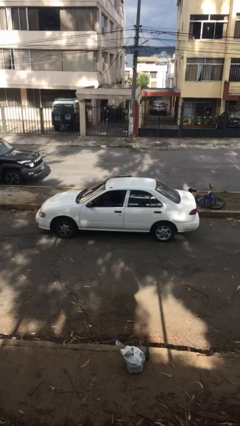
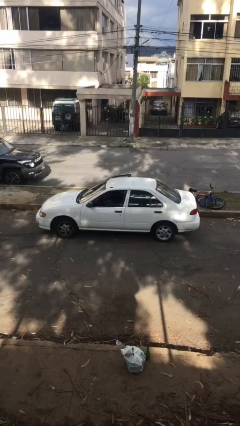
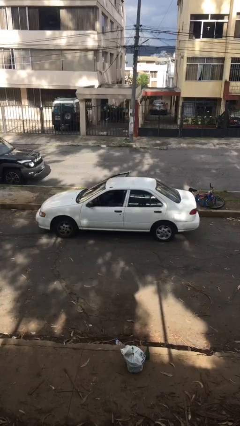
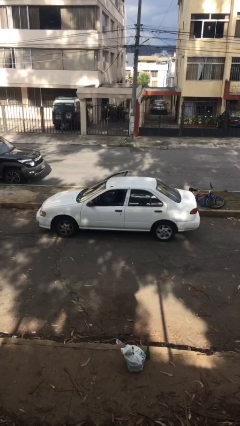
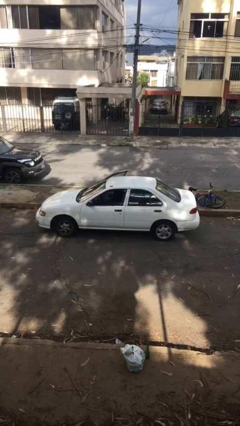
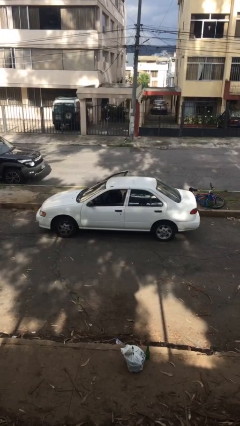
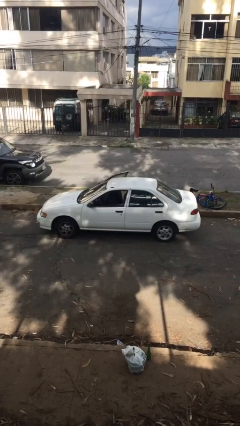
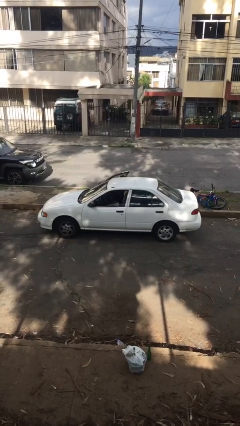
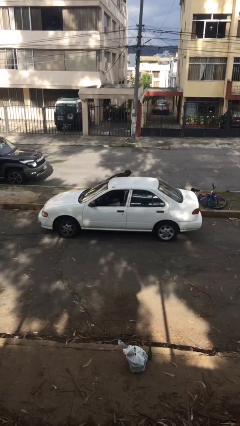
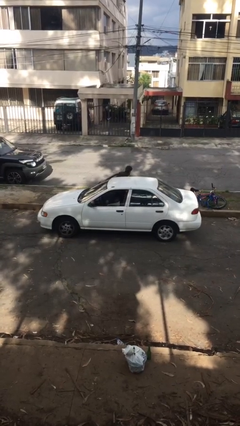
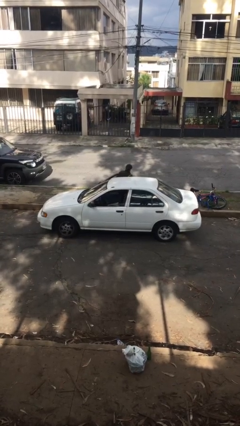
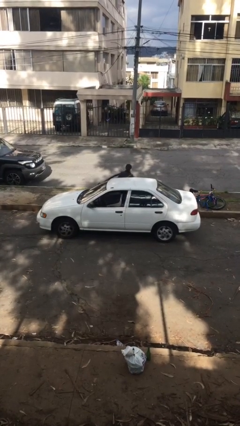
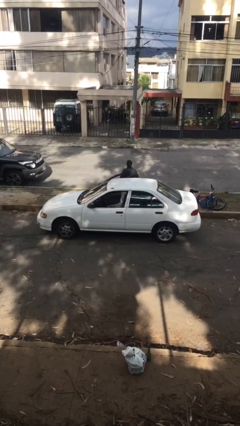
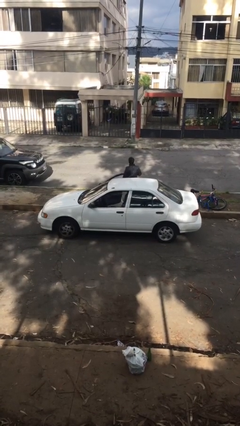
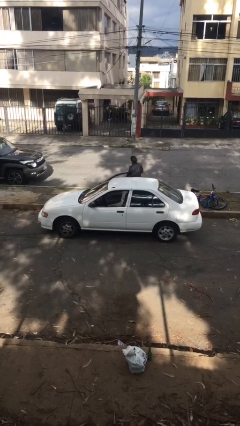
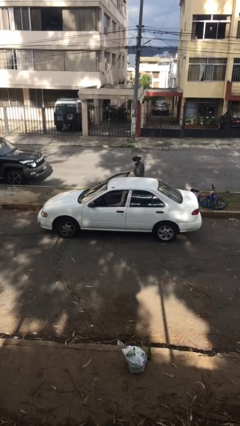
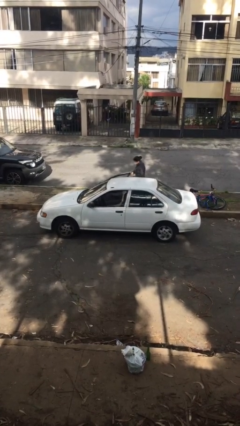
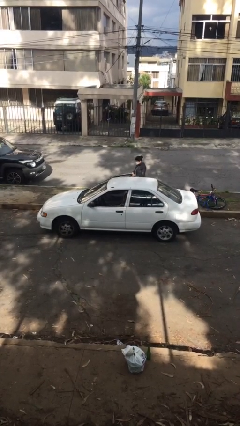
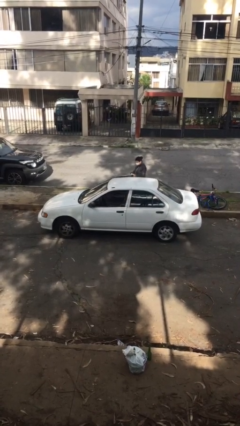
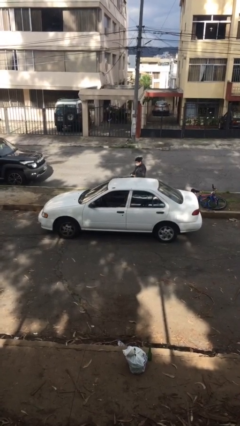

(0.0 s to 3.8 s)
car drops off person

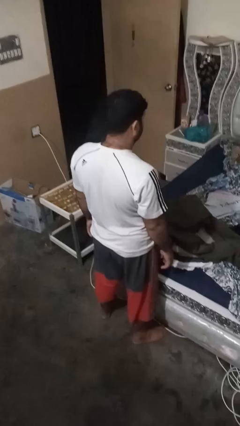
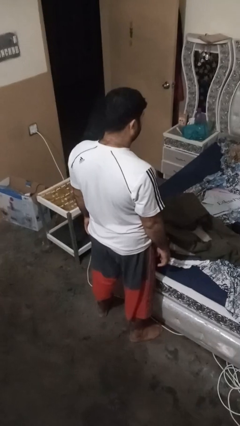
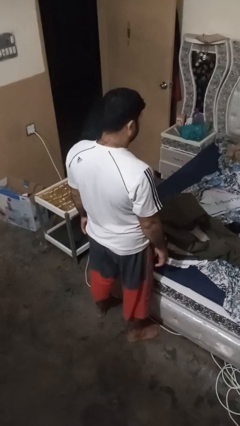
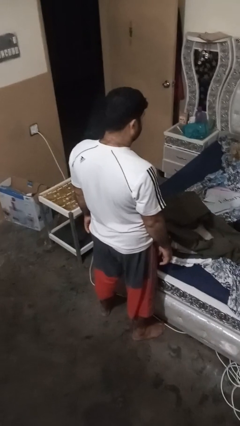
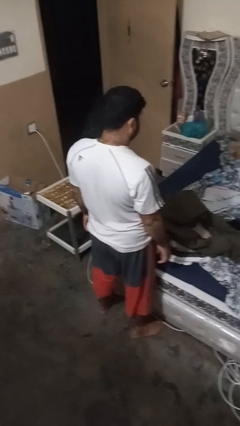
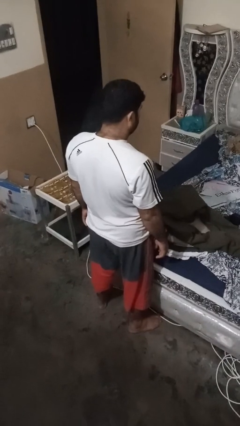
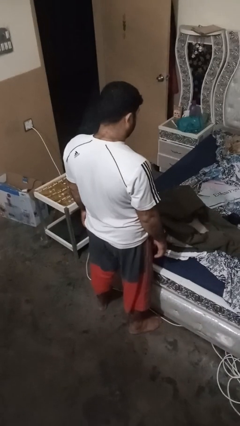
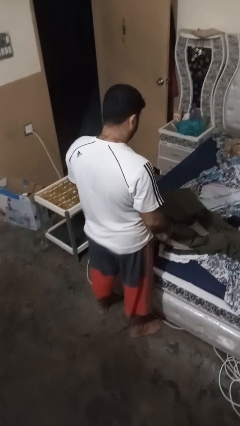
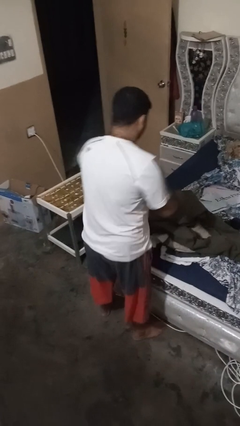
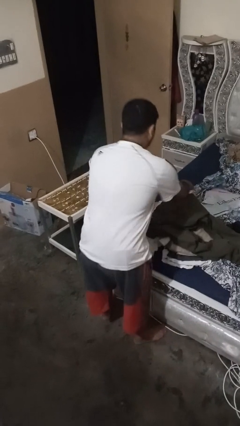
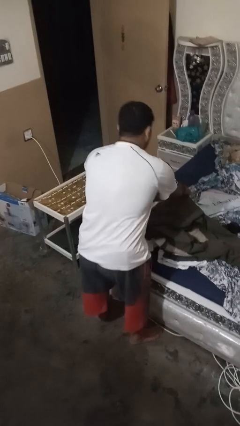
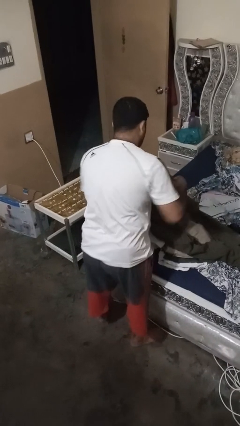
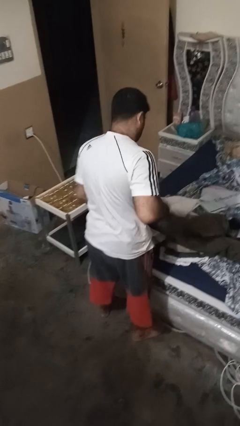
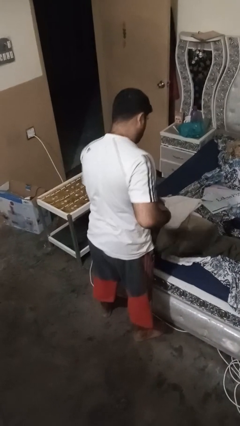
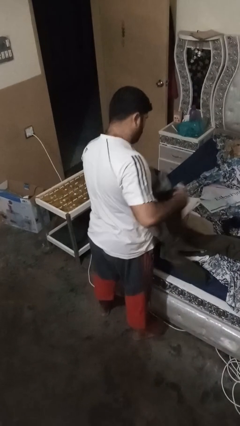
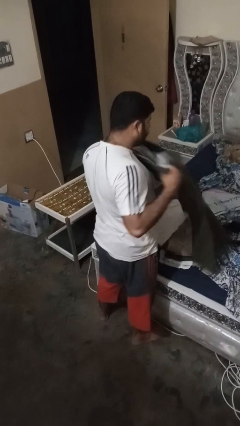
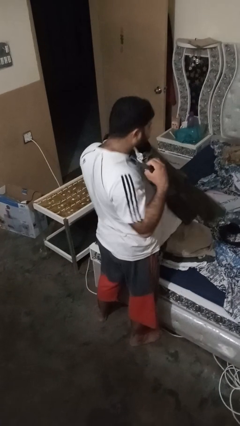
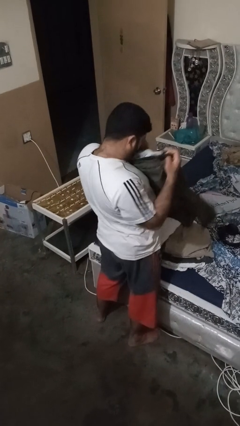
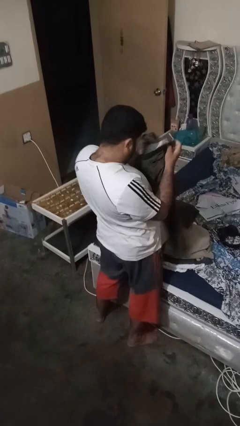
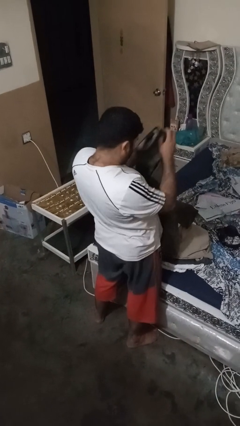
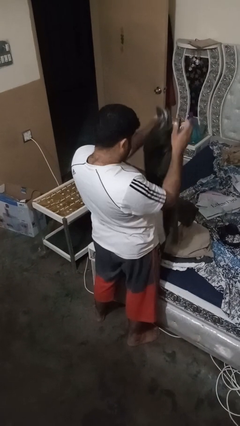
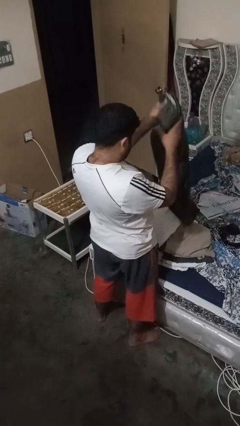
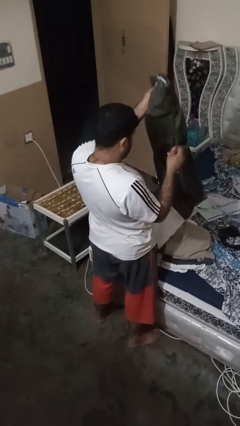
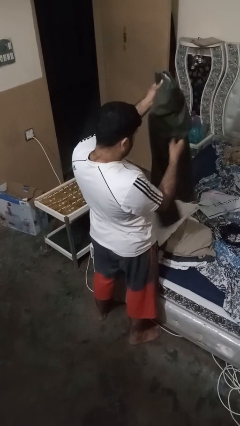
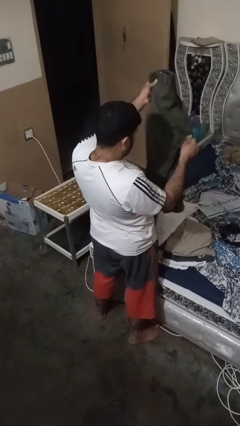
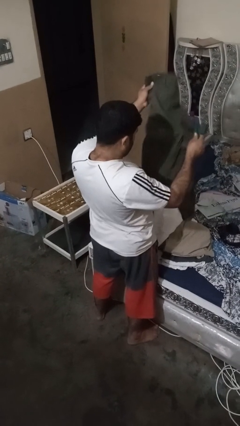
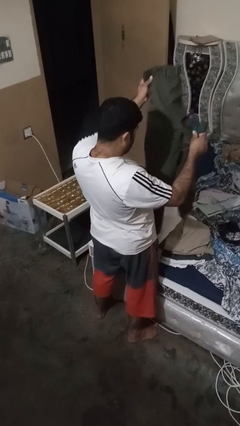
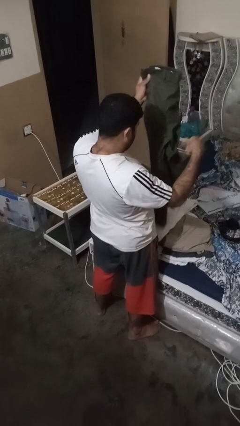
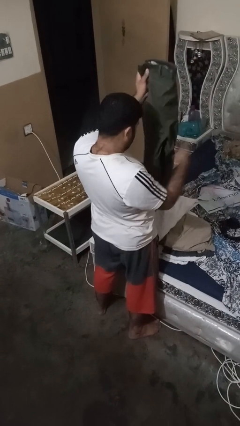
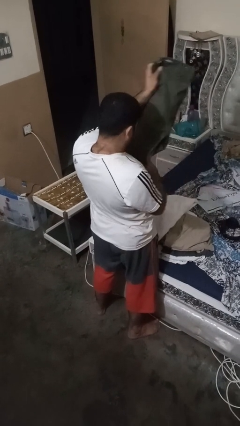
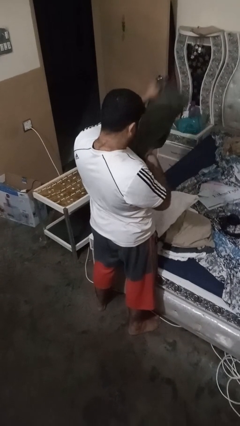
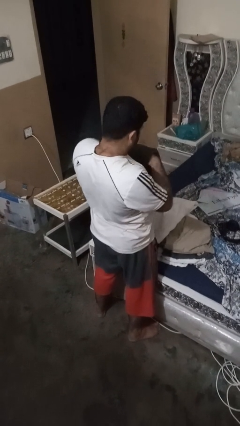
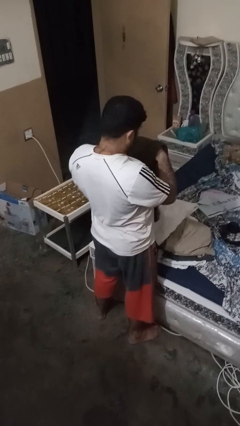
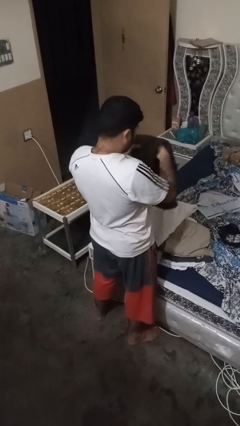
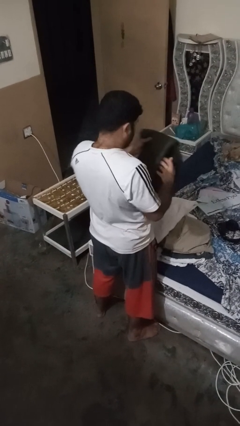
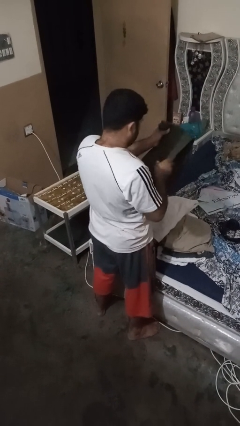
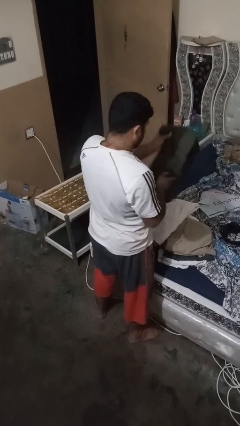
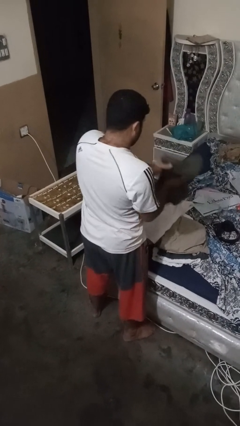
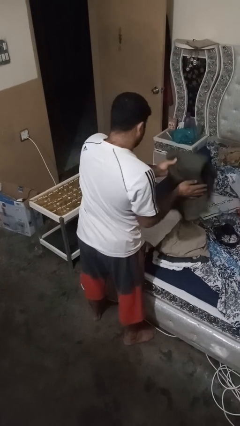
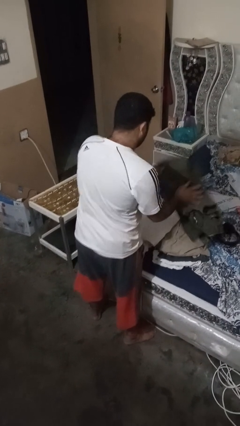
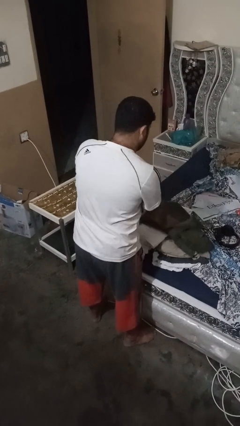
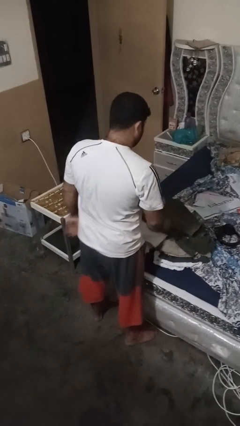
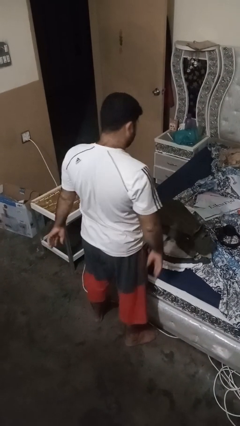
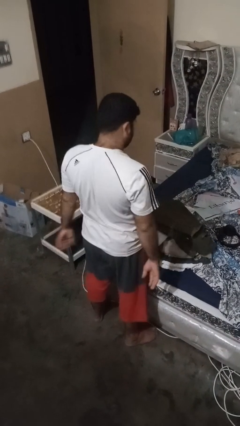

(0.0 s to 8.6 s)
person folds pants

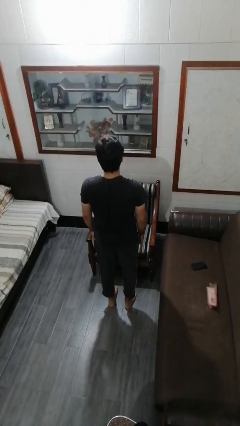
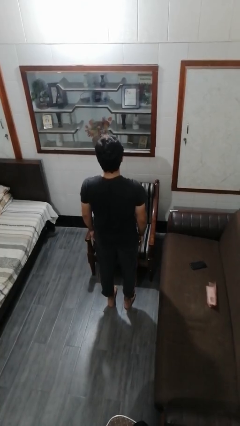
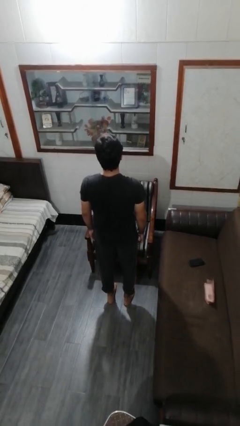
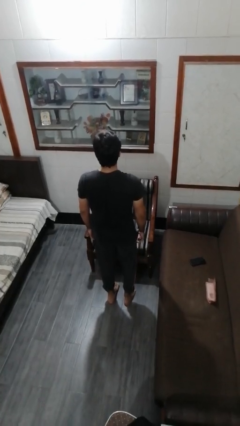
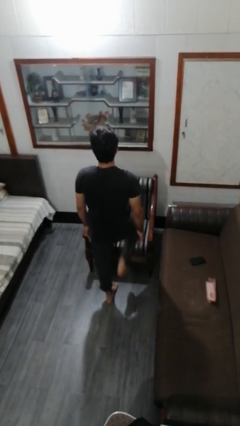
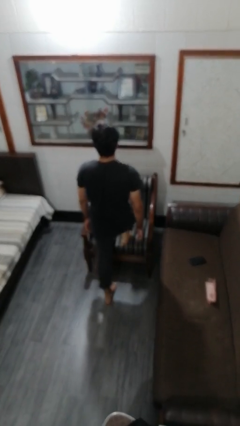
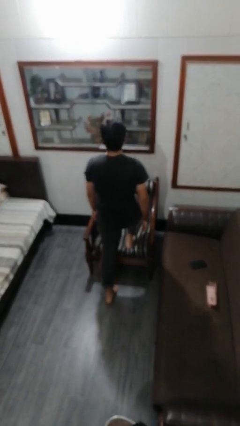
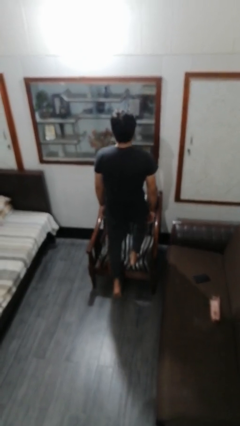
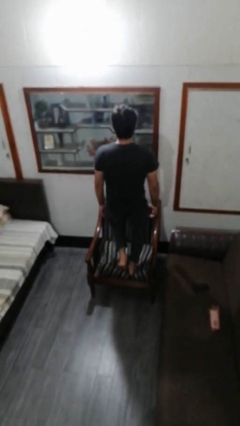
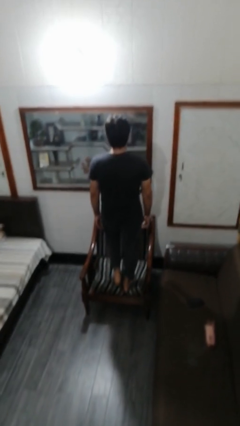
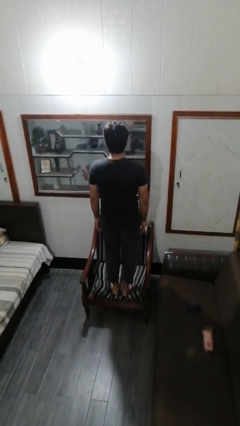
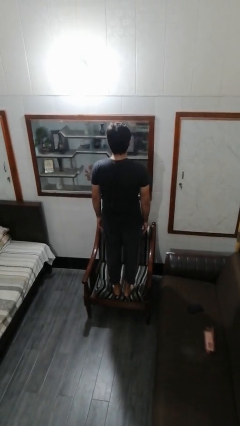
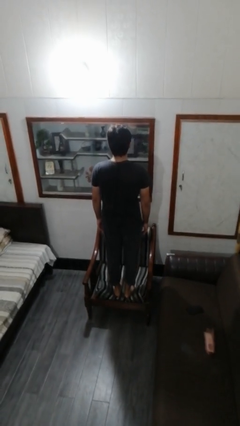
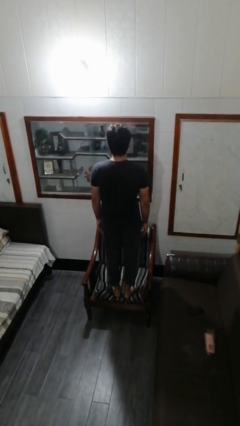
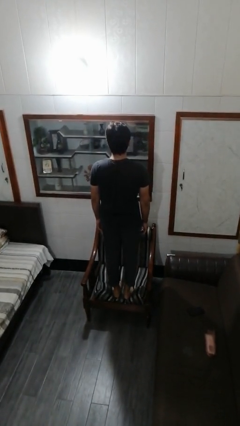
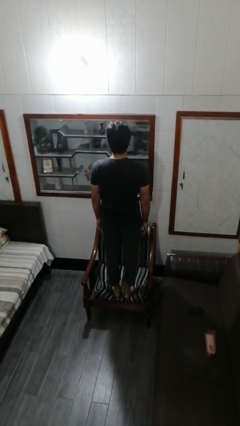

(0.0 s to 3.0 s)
person climbs on chair

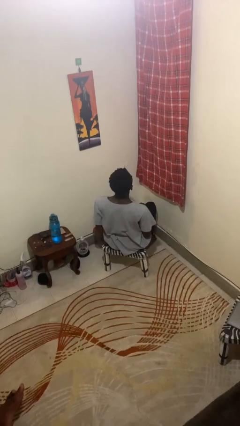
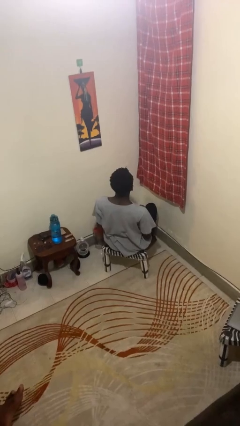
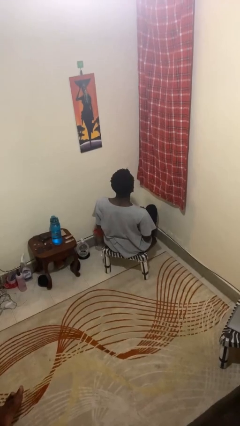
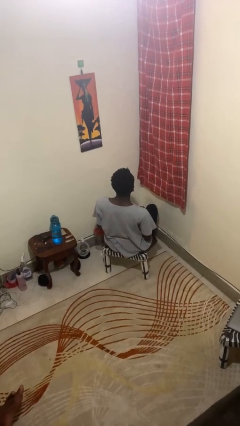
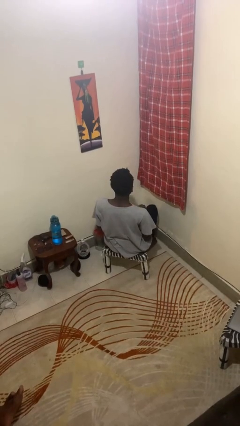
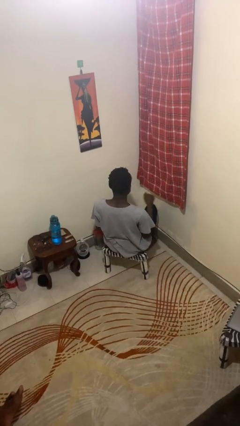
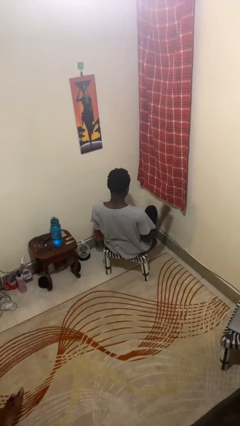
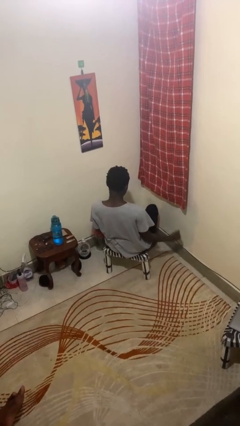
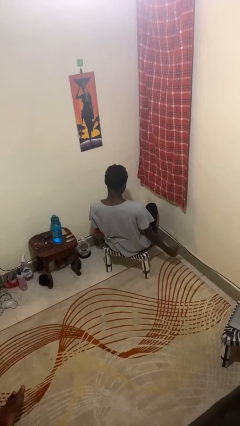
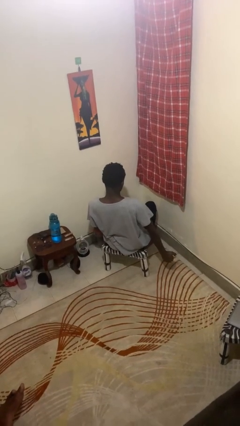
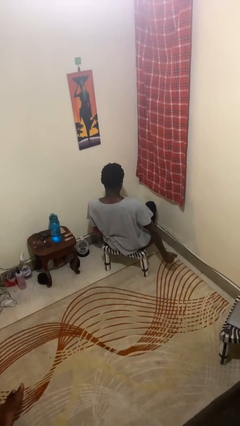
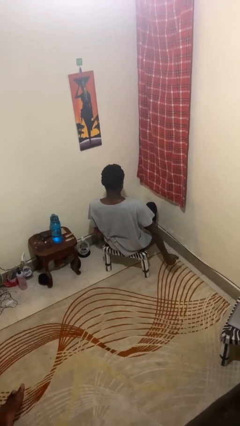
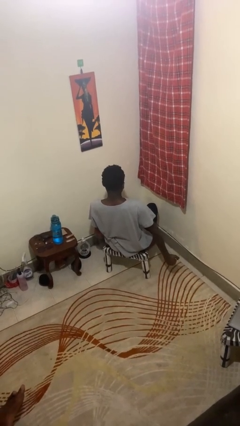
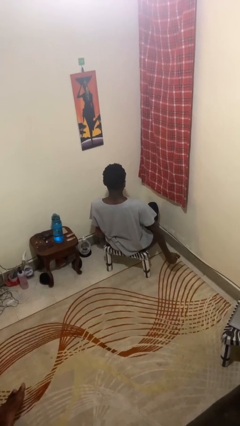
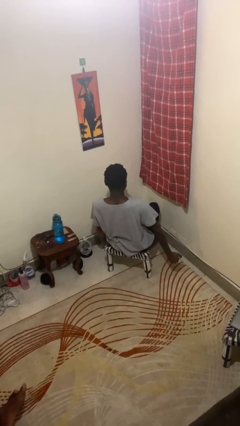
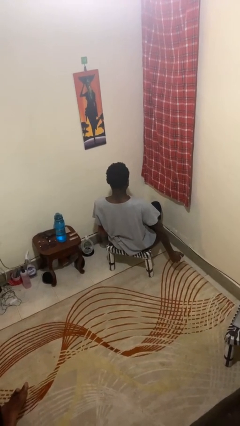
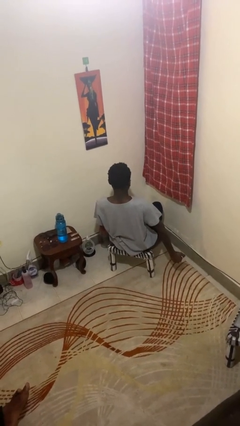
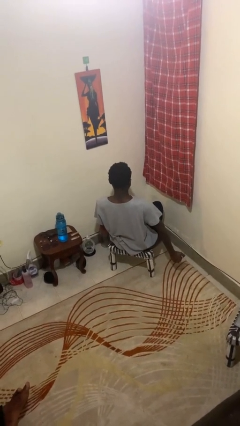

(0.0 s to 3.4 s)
person stretches arms to side
